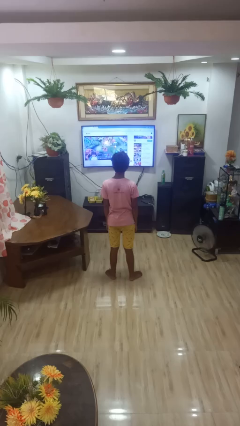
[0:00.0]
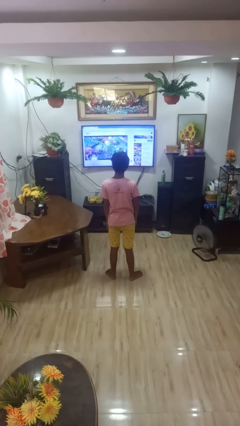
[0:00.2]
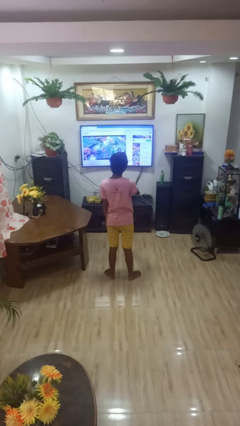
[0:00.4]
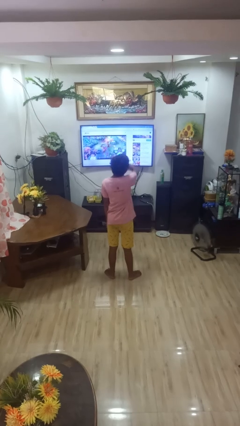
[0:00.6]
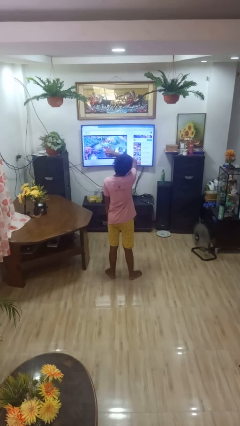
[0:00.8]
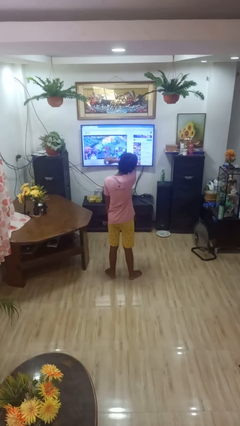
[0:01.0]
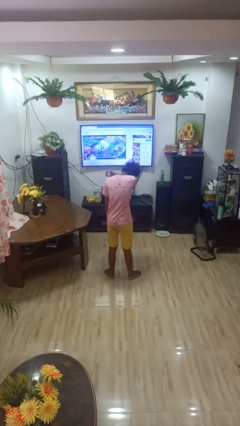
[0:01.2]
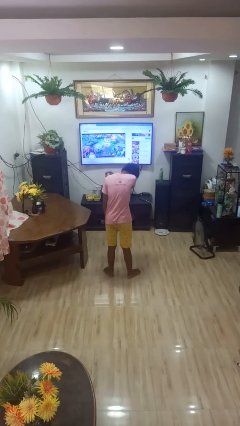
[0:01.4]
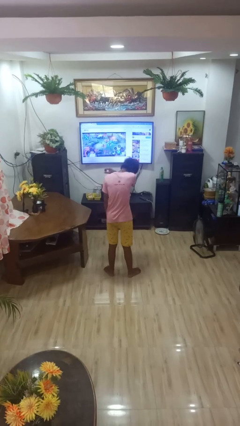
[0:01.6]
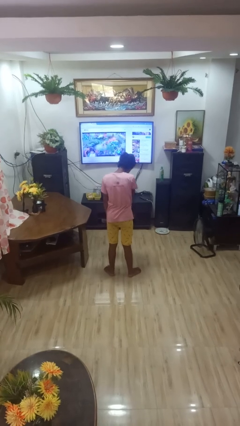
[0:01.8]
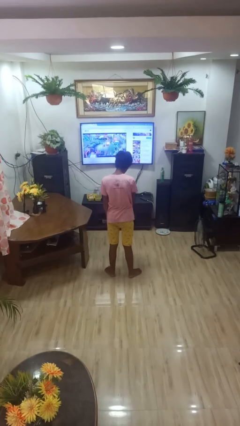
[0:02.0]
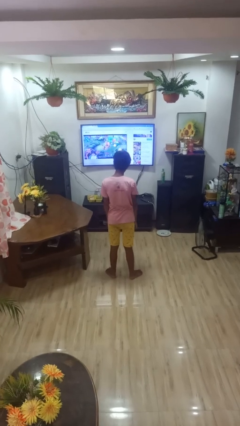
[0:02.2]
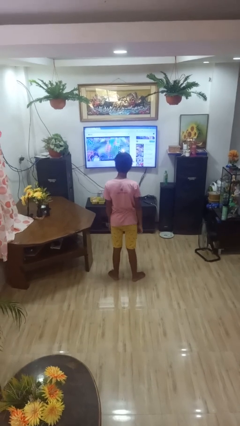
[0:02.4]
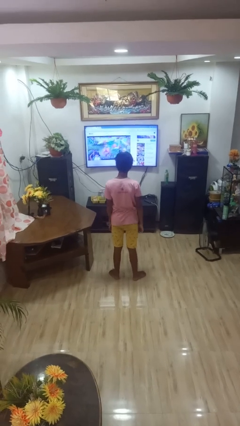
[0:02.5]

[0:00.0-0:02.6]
person sneezes into arm

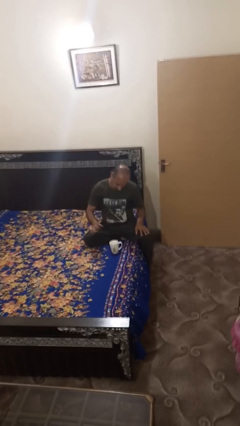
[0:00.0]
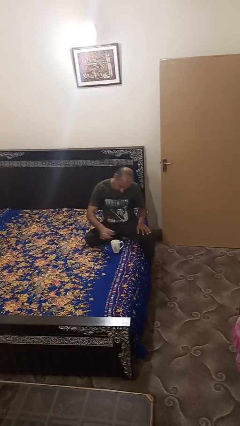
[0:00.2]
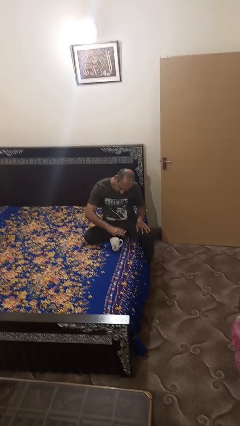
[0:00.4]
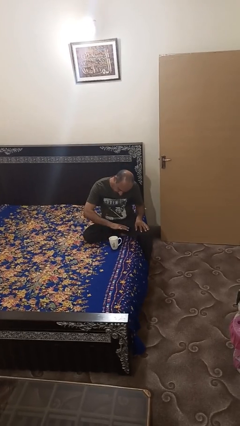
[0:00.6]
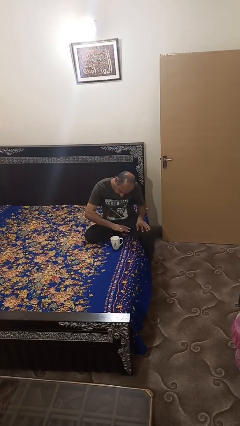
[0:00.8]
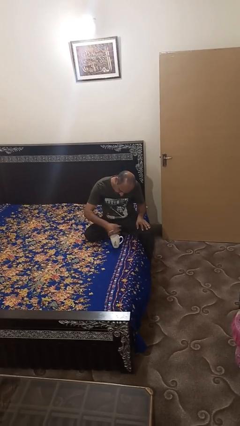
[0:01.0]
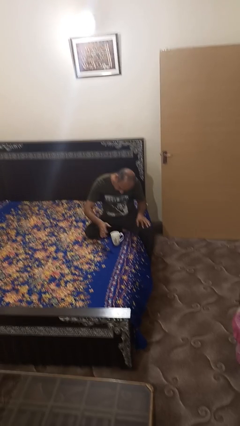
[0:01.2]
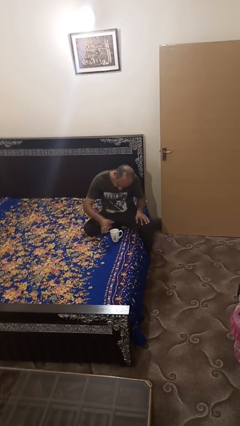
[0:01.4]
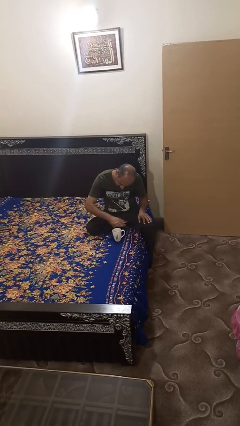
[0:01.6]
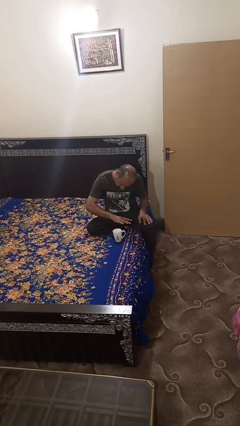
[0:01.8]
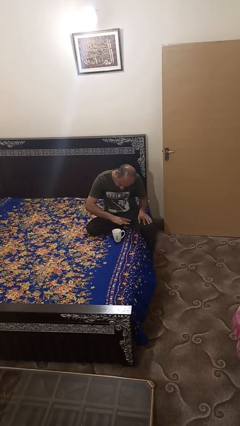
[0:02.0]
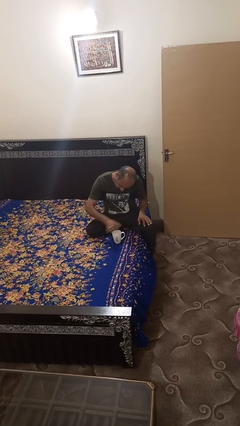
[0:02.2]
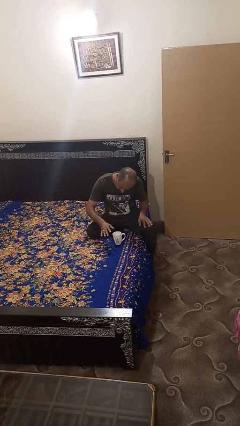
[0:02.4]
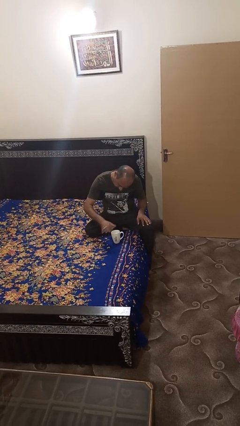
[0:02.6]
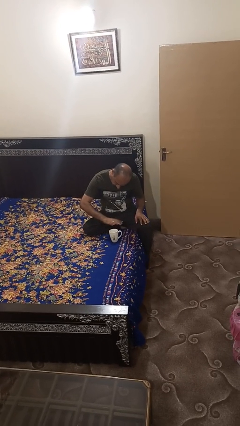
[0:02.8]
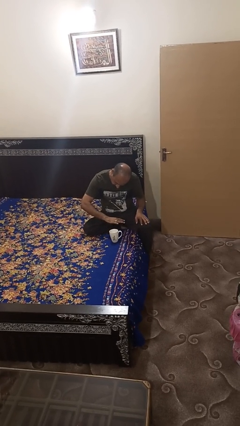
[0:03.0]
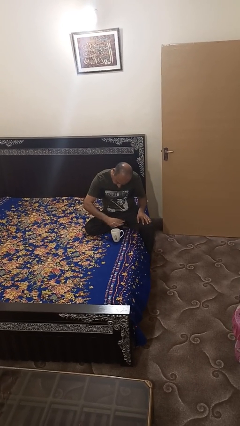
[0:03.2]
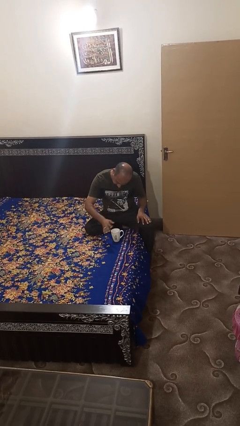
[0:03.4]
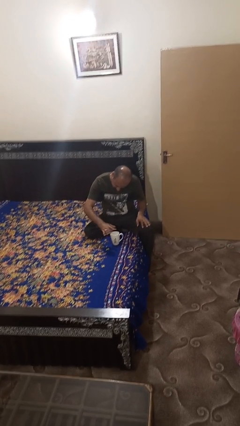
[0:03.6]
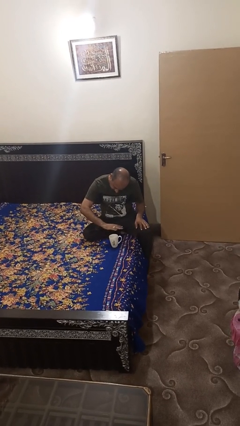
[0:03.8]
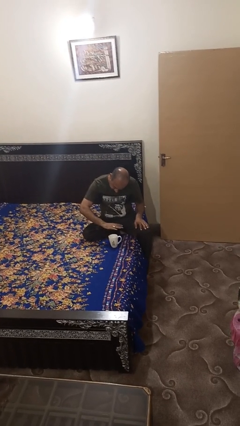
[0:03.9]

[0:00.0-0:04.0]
person waves hand over object

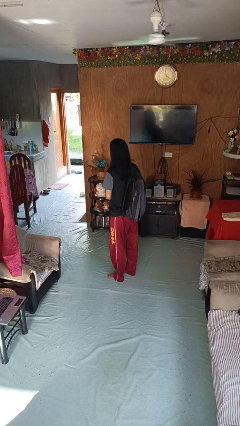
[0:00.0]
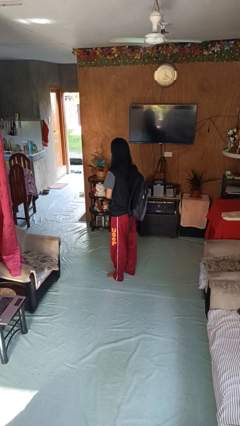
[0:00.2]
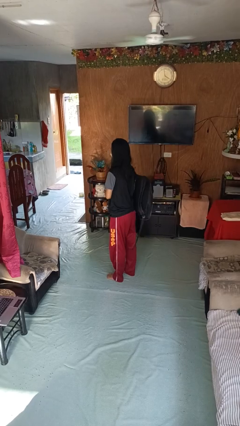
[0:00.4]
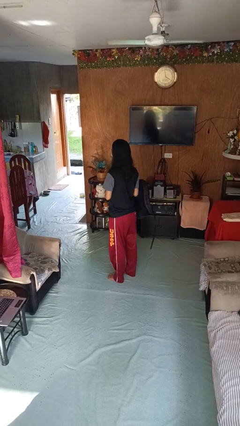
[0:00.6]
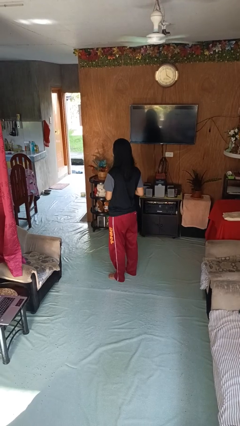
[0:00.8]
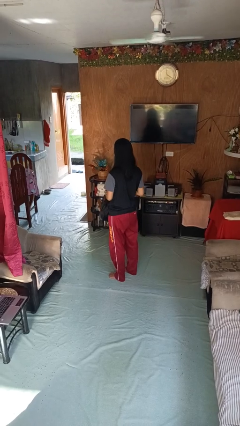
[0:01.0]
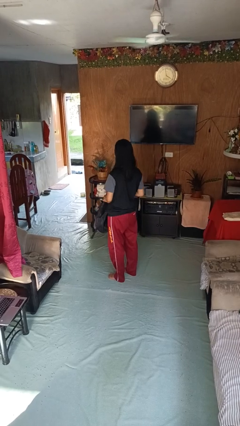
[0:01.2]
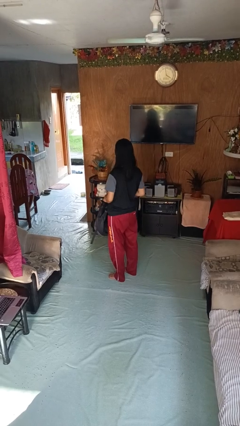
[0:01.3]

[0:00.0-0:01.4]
person takes off backpack

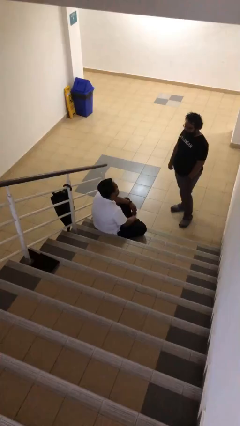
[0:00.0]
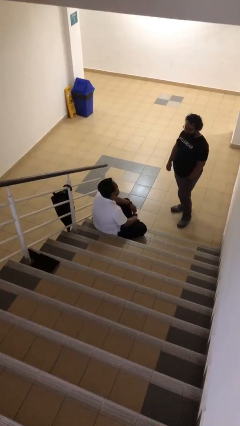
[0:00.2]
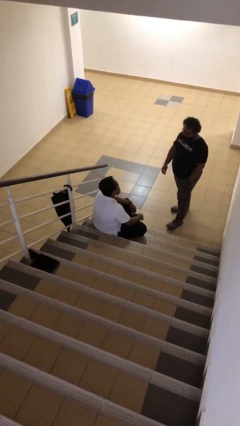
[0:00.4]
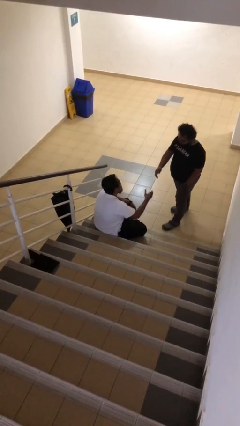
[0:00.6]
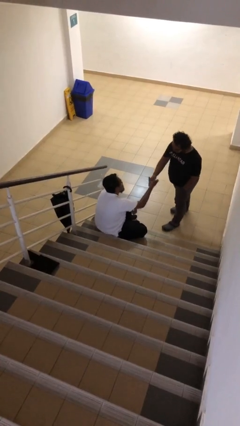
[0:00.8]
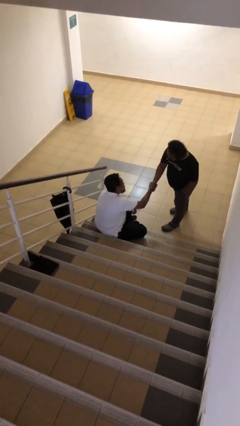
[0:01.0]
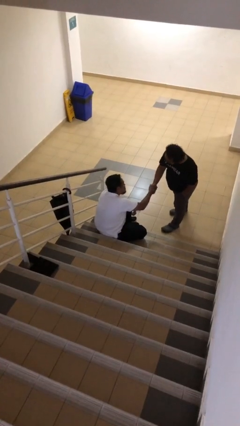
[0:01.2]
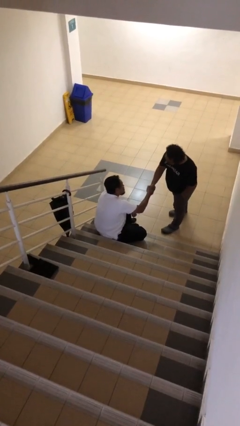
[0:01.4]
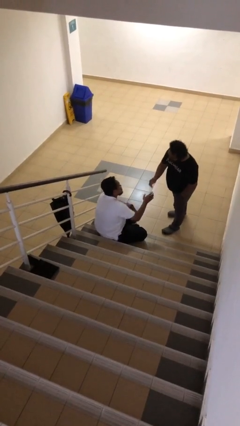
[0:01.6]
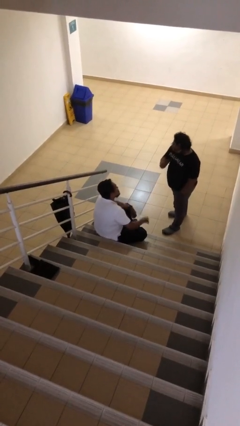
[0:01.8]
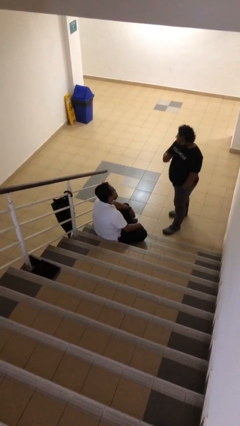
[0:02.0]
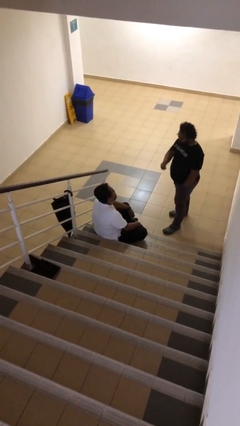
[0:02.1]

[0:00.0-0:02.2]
person shakes hand

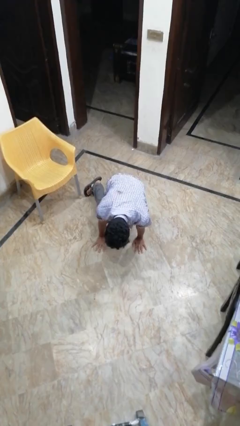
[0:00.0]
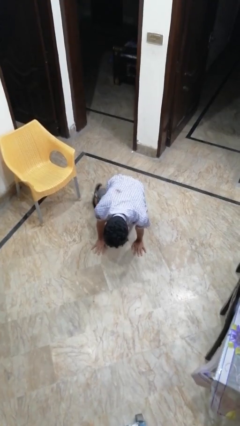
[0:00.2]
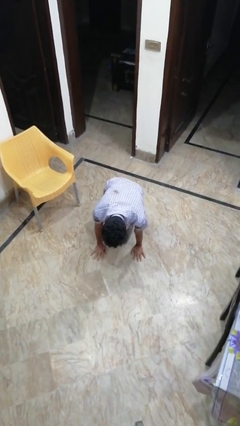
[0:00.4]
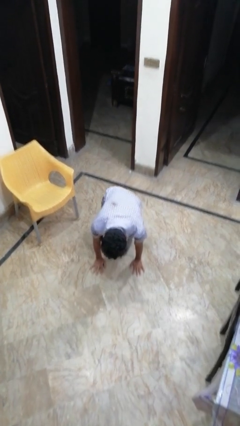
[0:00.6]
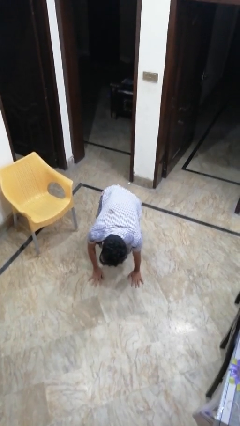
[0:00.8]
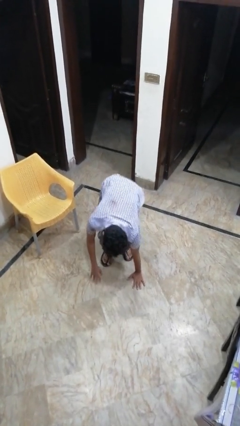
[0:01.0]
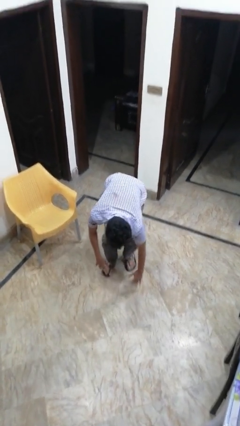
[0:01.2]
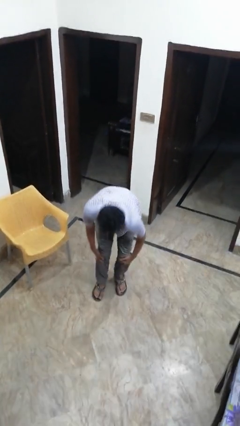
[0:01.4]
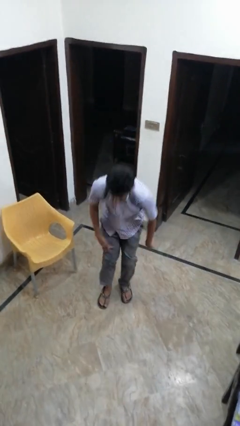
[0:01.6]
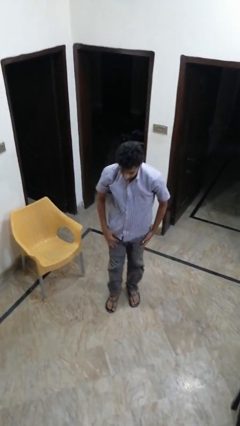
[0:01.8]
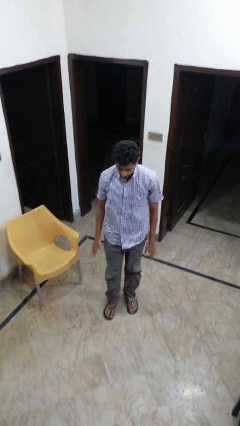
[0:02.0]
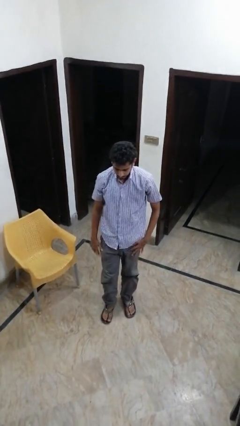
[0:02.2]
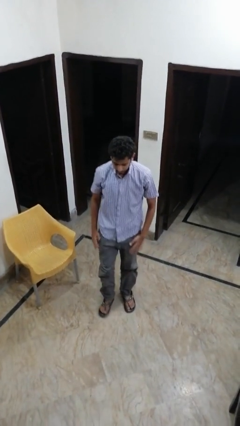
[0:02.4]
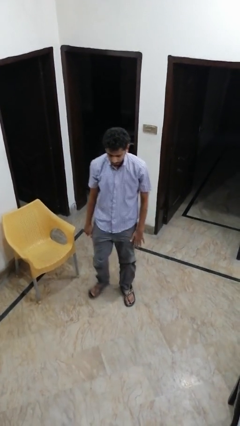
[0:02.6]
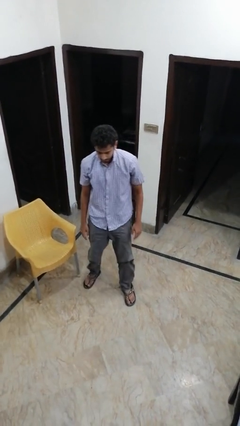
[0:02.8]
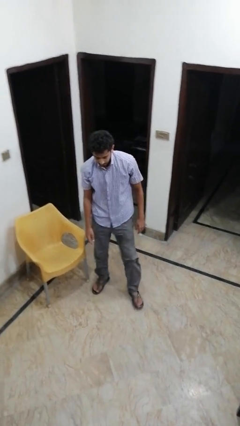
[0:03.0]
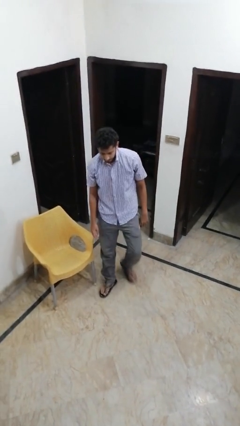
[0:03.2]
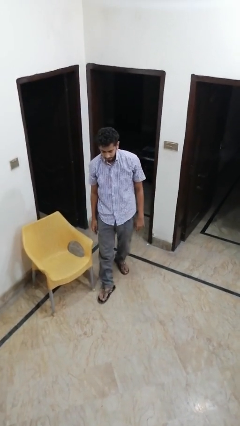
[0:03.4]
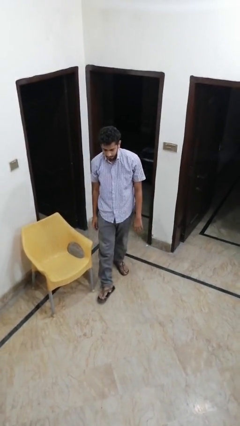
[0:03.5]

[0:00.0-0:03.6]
person stands up from floor

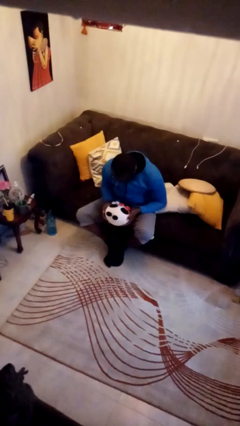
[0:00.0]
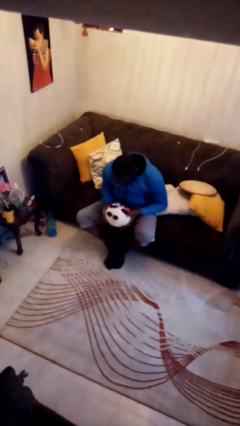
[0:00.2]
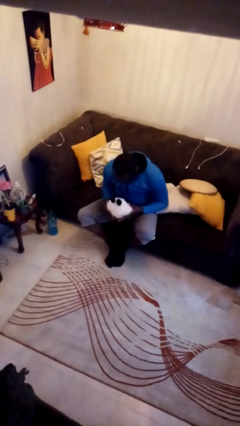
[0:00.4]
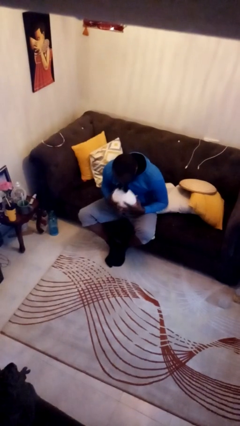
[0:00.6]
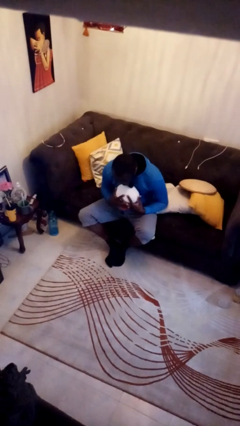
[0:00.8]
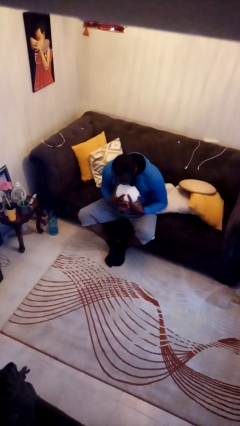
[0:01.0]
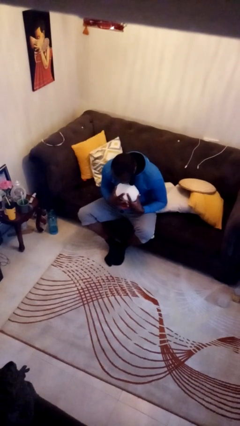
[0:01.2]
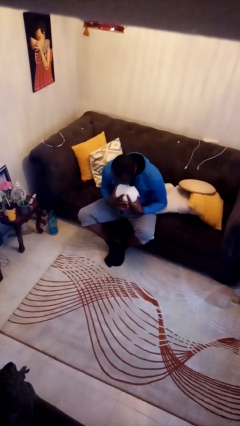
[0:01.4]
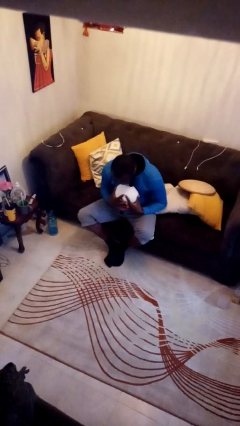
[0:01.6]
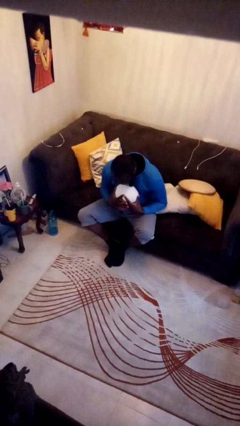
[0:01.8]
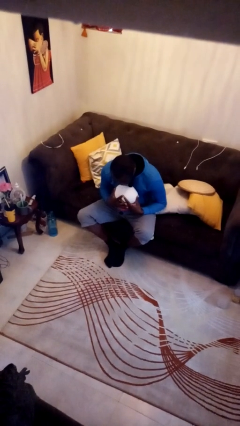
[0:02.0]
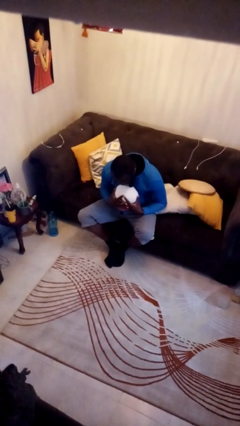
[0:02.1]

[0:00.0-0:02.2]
person hugs stuffed animal

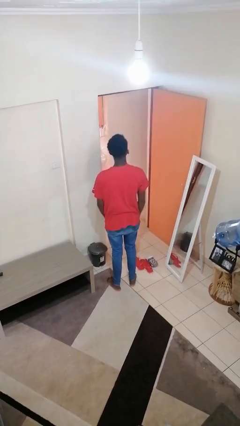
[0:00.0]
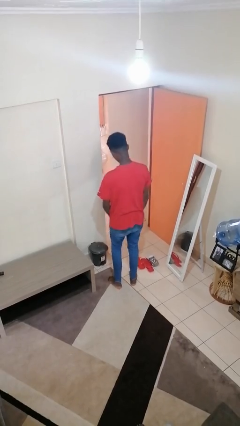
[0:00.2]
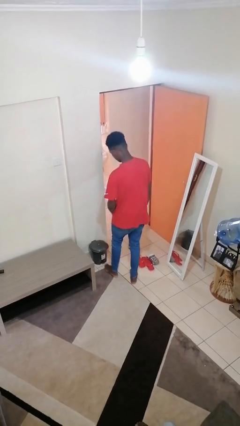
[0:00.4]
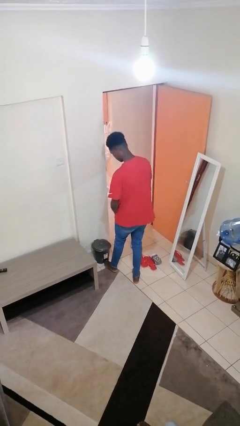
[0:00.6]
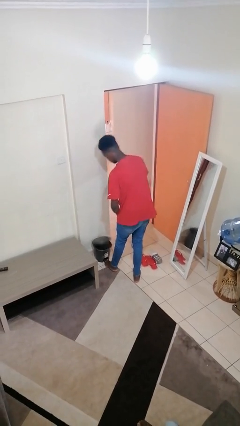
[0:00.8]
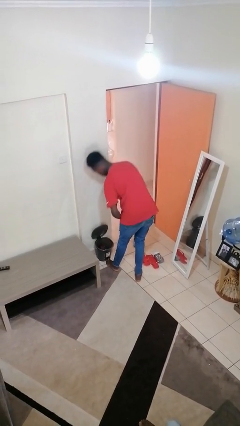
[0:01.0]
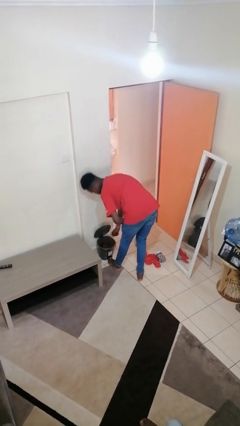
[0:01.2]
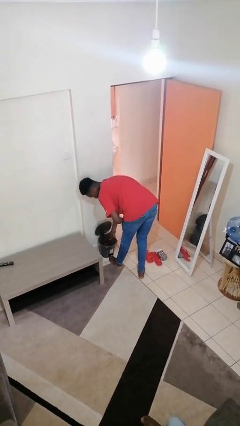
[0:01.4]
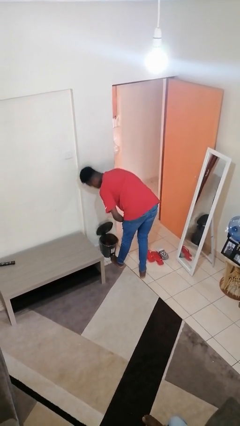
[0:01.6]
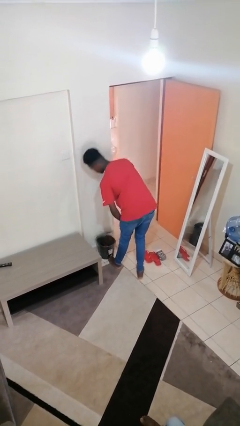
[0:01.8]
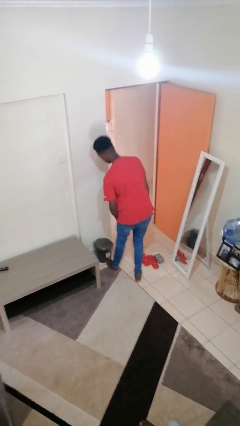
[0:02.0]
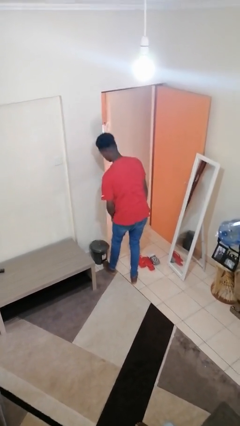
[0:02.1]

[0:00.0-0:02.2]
person discards trash
